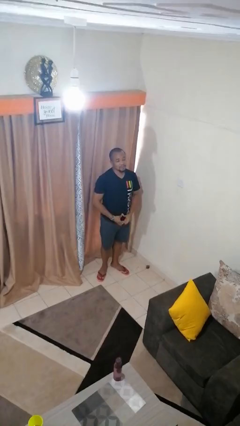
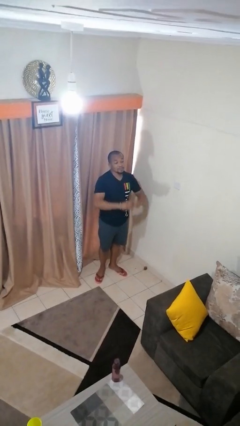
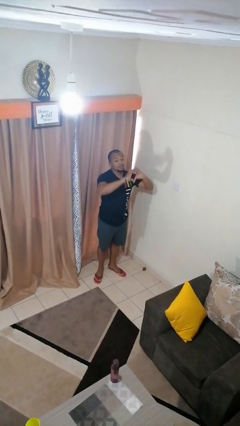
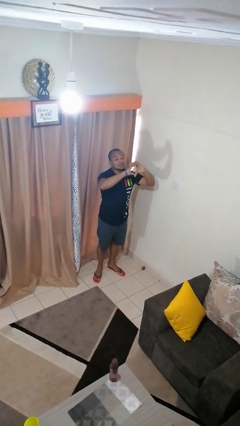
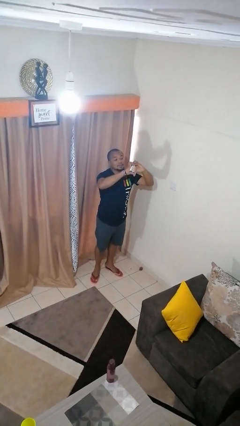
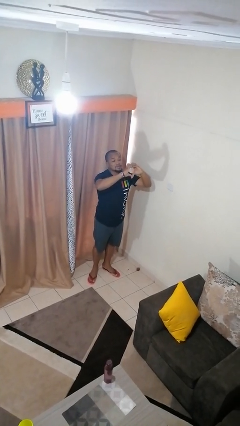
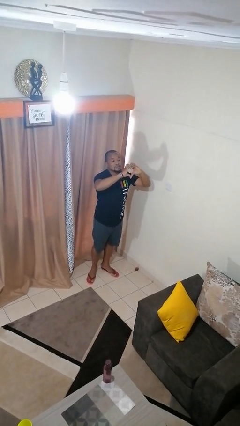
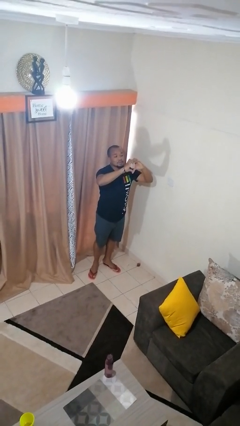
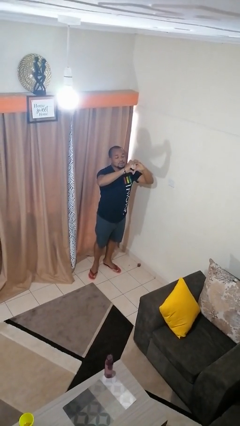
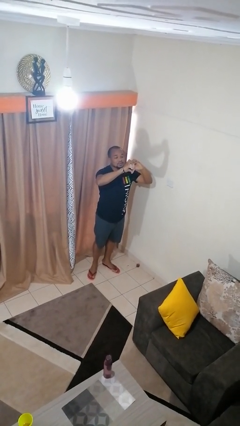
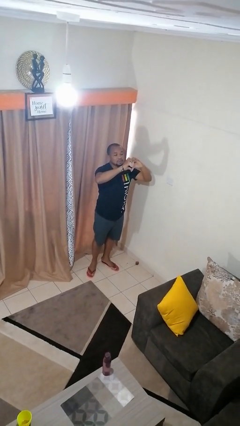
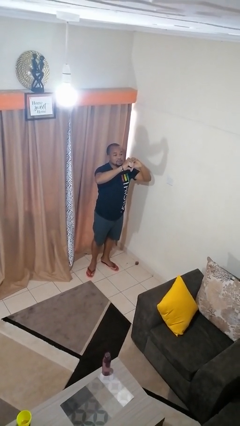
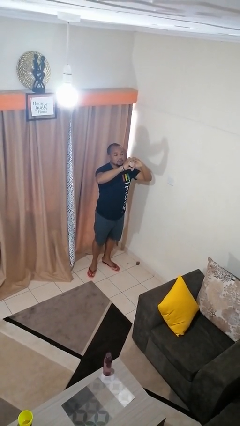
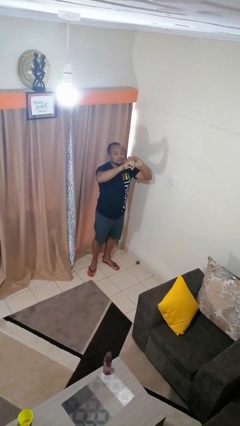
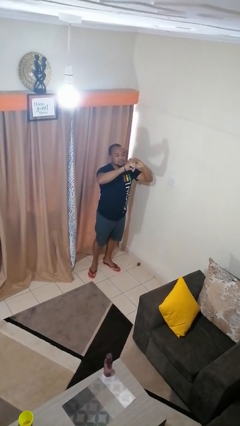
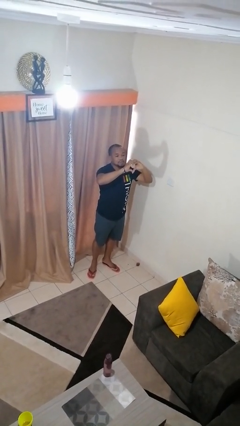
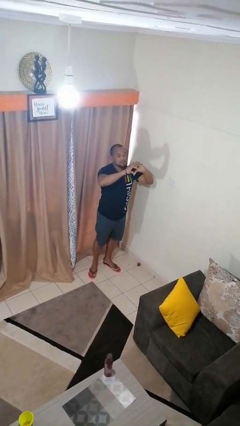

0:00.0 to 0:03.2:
person gestures heart

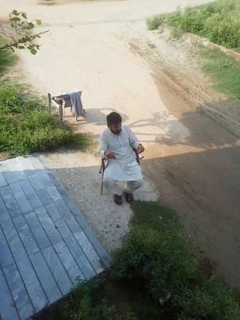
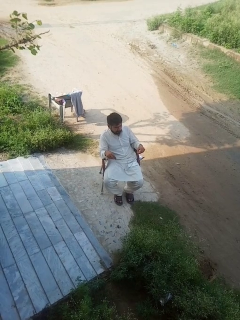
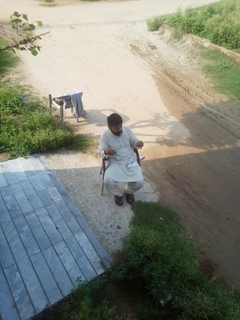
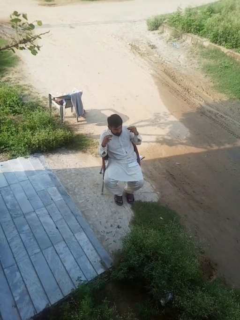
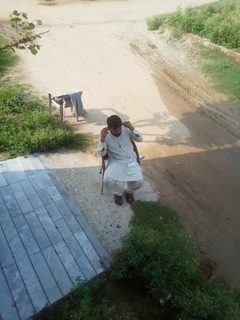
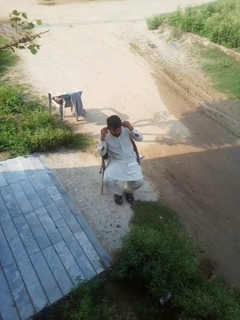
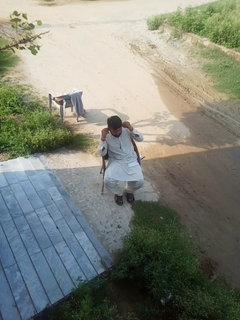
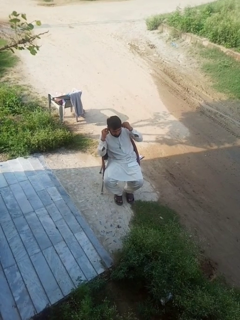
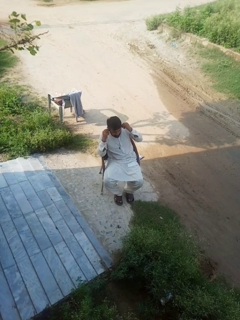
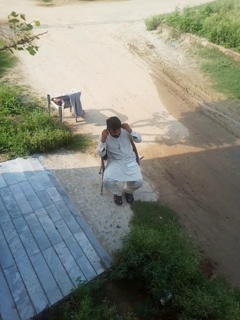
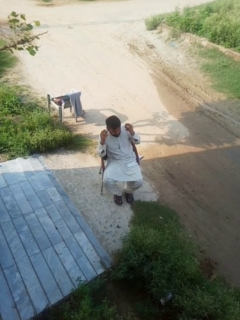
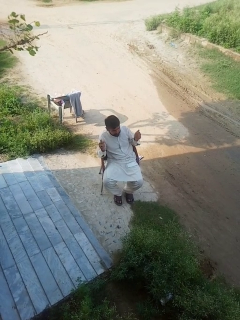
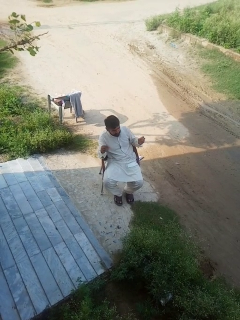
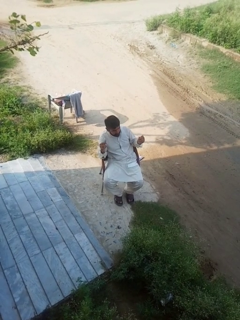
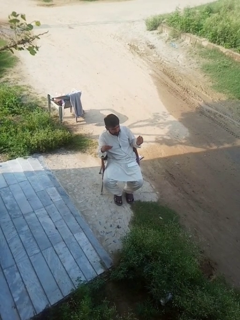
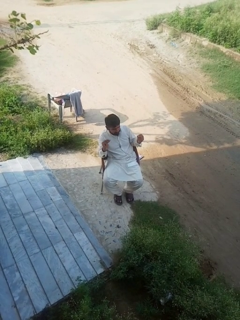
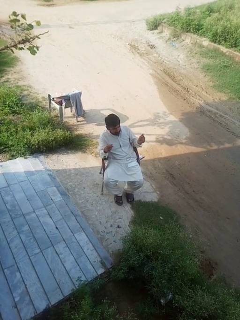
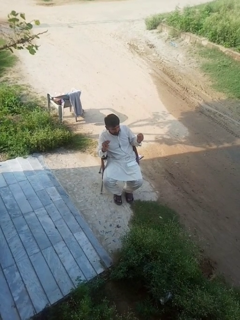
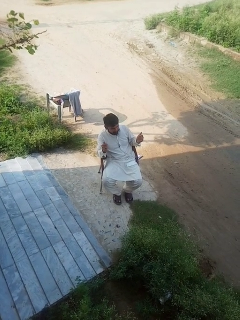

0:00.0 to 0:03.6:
person puts on headphones

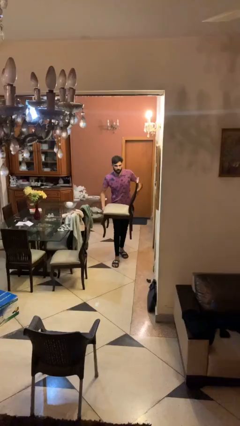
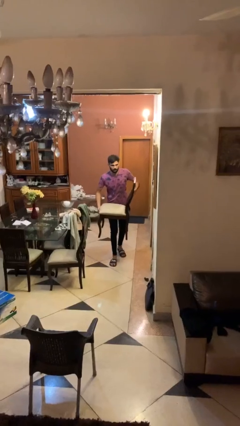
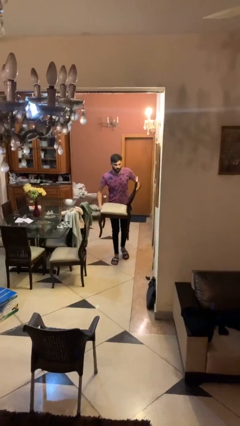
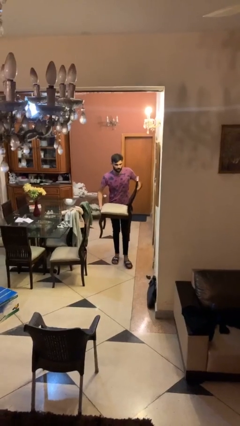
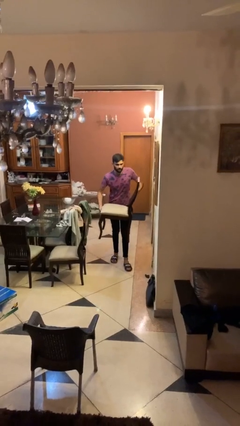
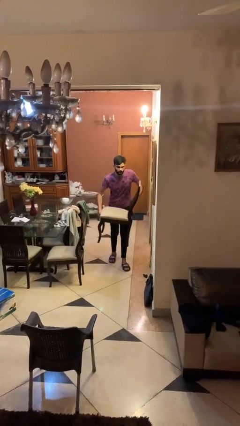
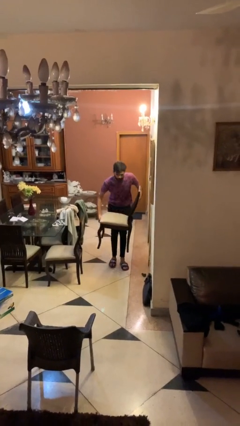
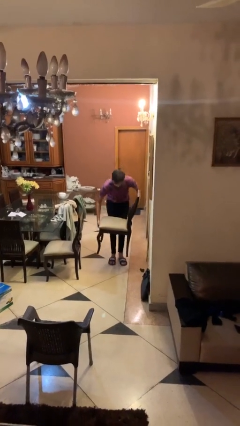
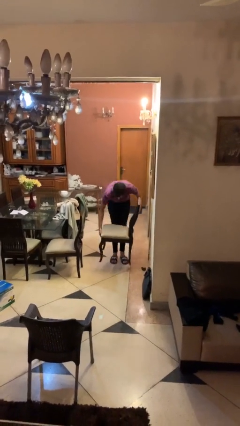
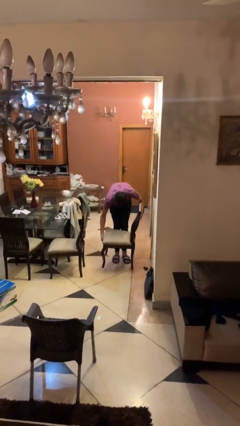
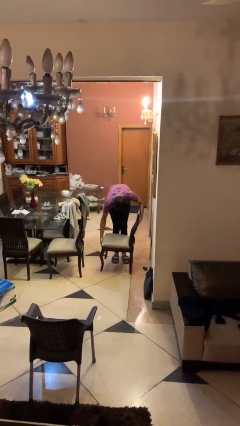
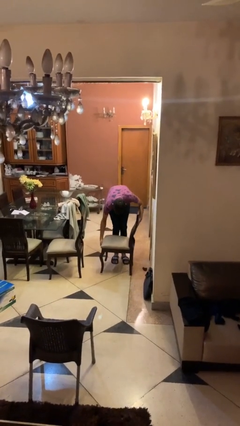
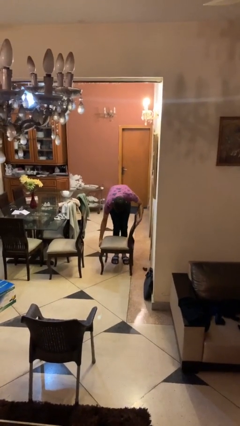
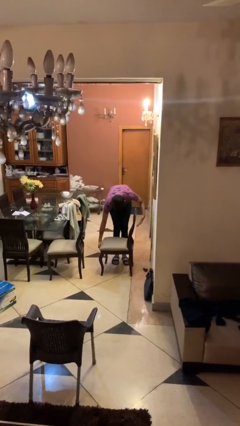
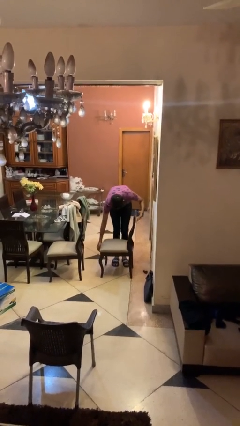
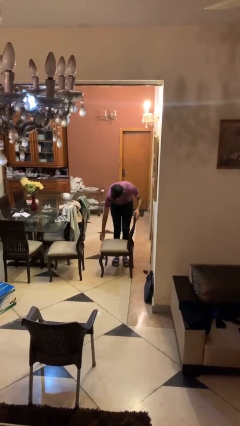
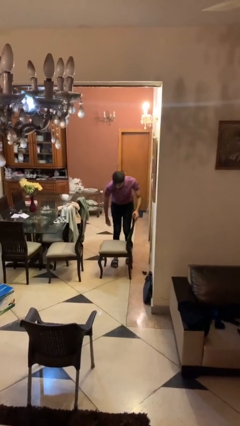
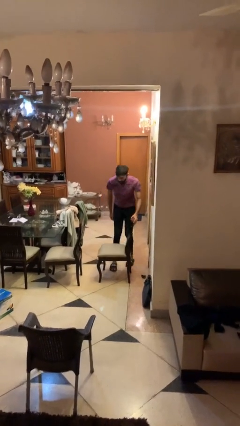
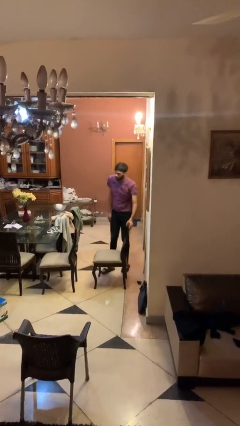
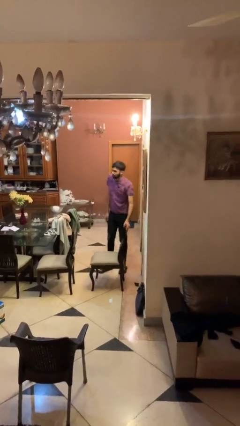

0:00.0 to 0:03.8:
person puts down object on floor

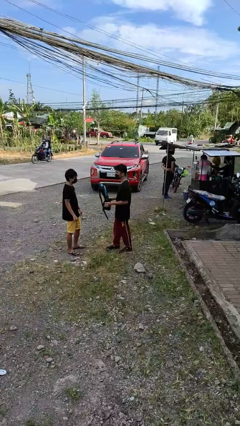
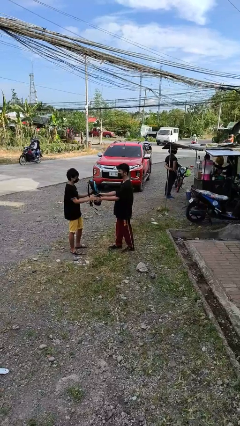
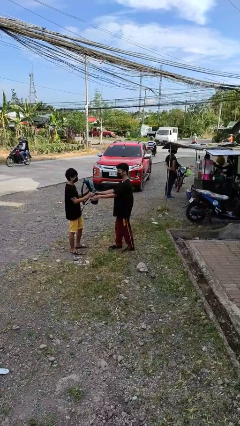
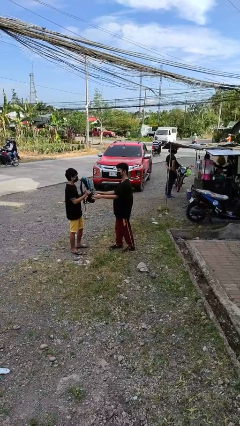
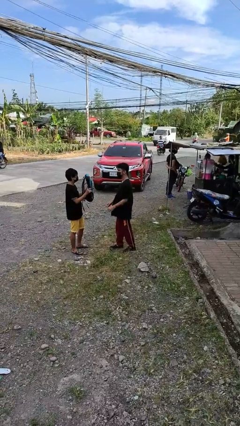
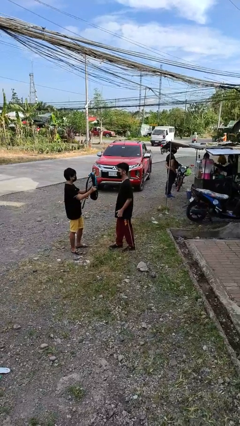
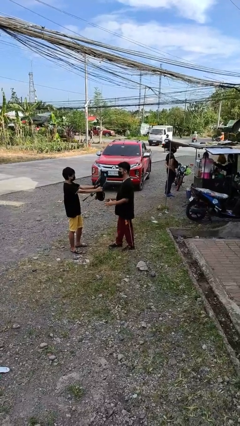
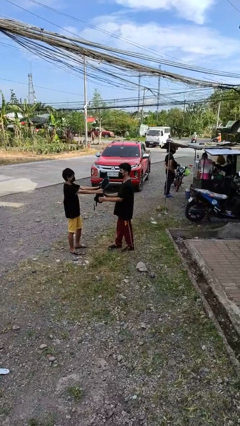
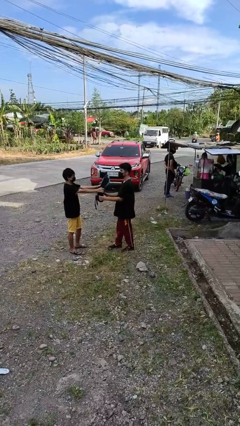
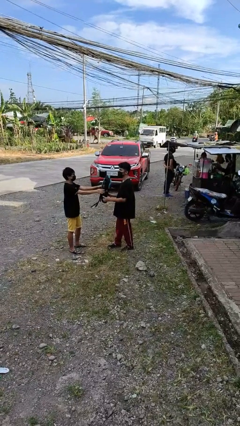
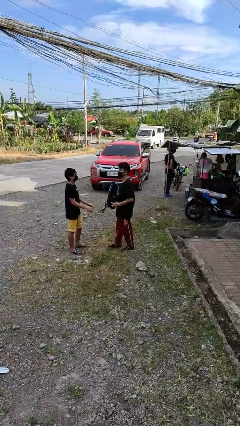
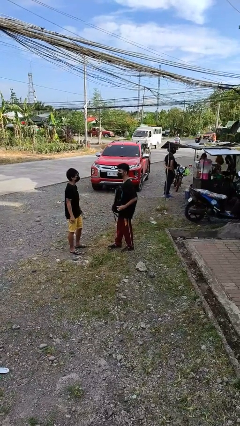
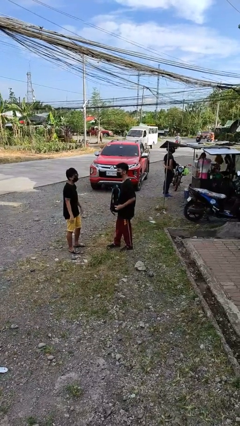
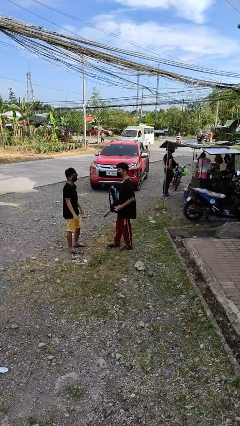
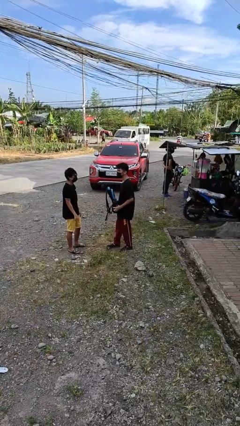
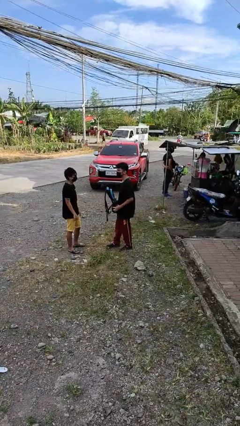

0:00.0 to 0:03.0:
person transfers object to person

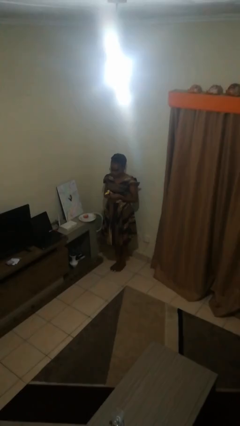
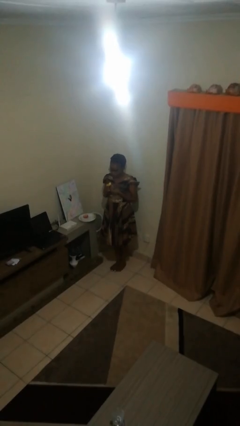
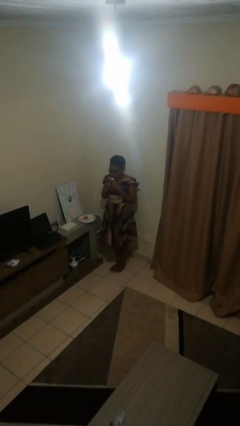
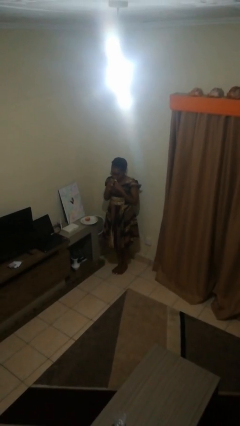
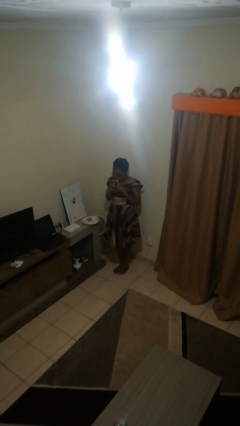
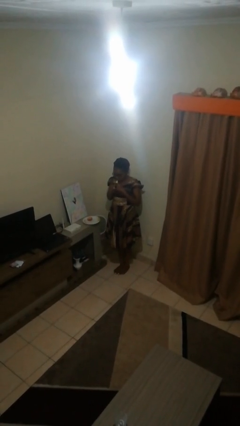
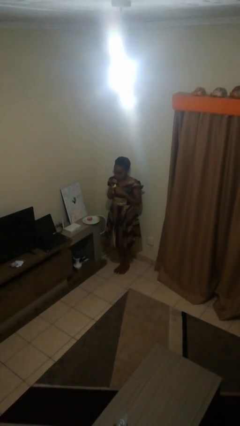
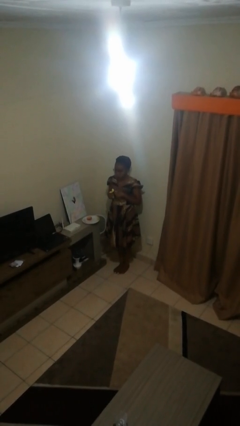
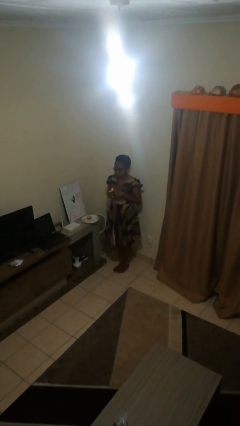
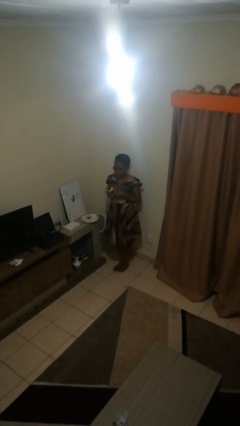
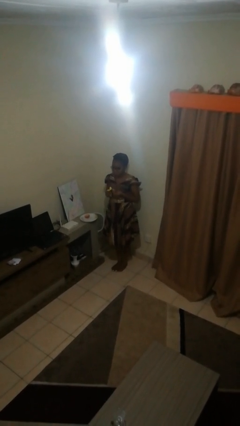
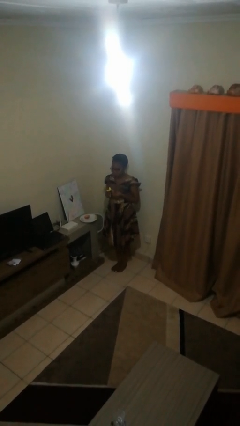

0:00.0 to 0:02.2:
person eats banana

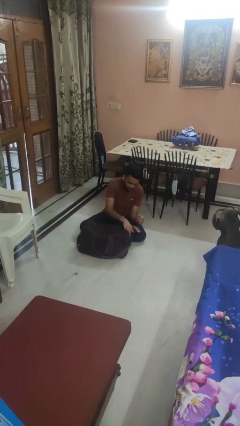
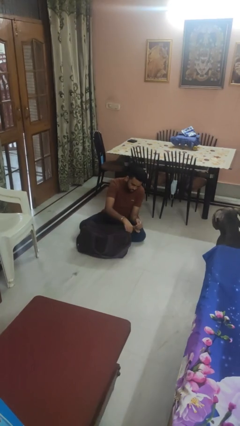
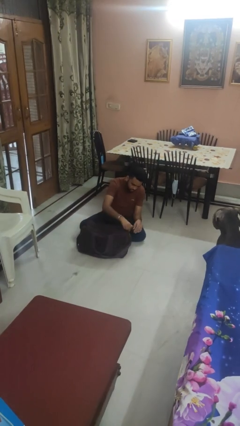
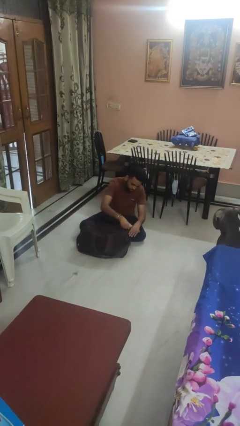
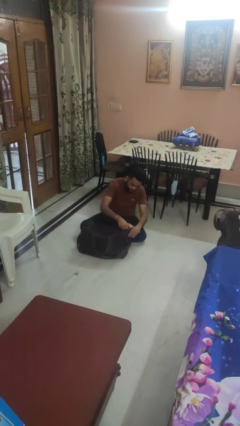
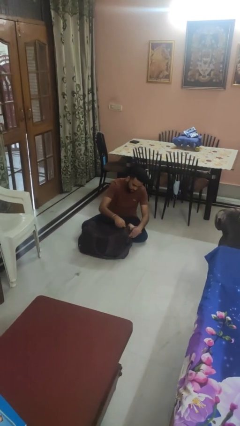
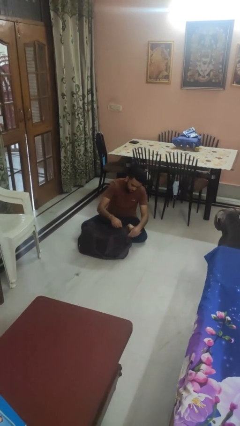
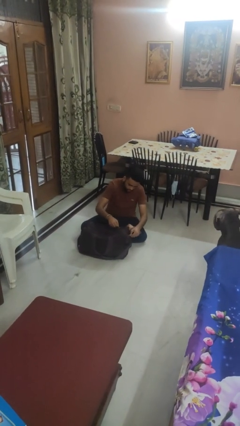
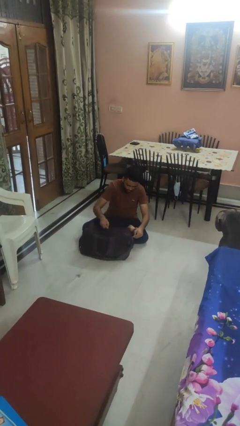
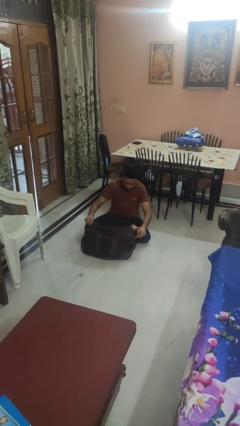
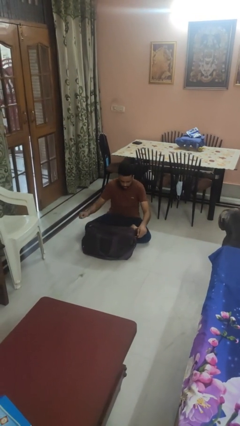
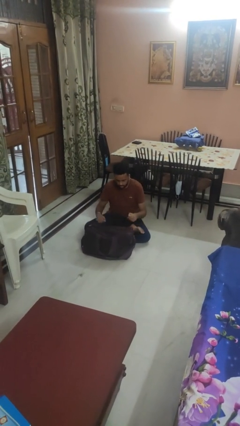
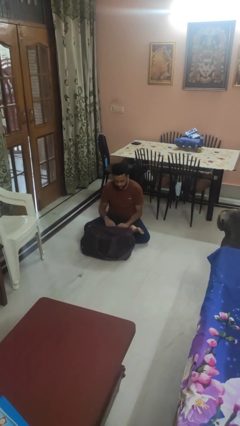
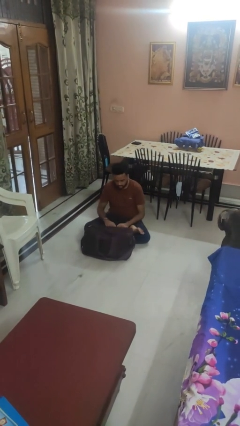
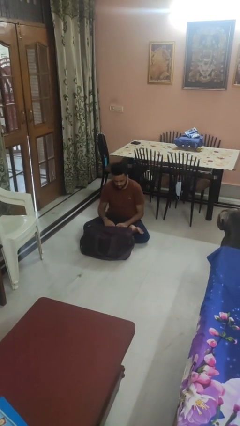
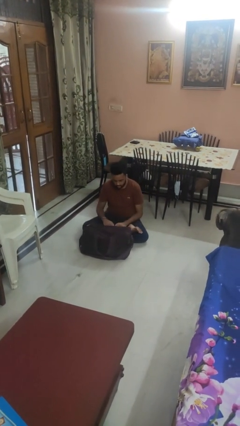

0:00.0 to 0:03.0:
person opens suitcase

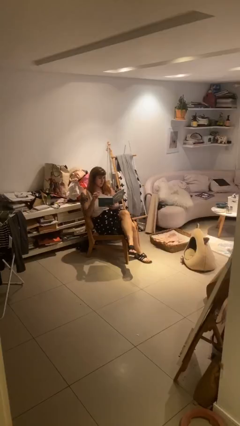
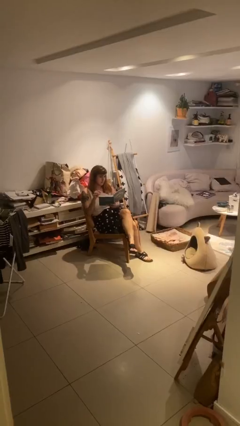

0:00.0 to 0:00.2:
person reads document
